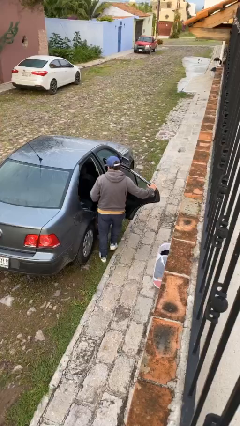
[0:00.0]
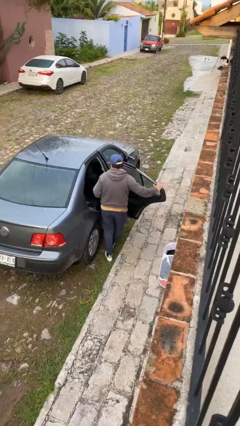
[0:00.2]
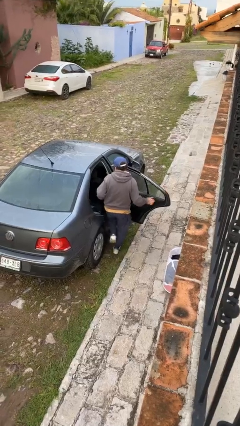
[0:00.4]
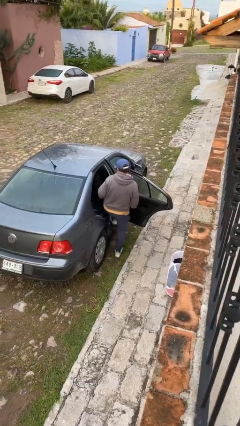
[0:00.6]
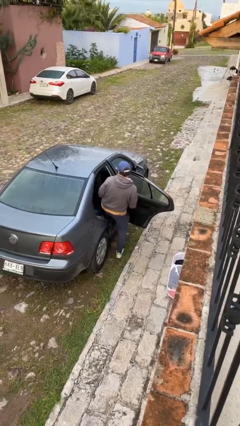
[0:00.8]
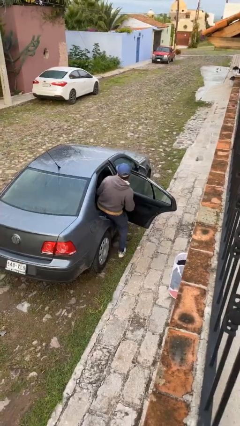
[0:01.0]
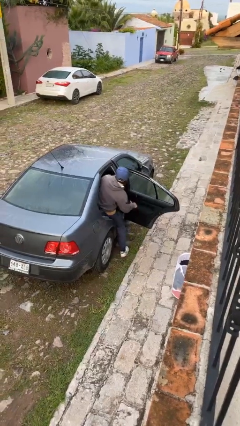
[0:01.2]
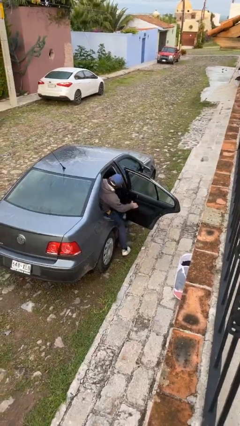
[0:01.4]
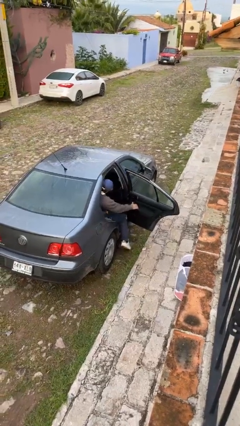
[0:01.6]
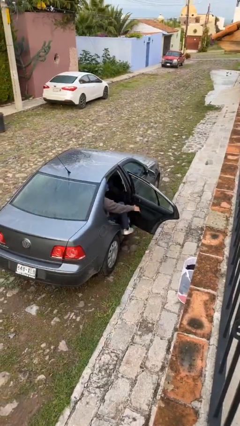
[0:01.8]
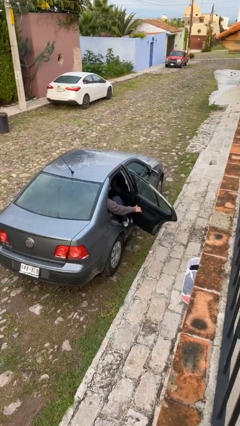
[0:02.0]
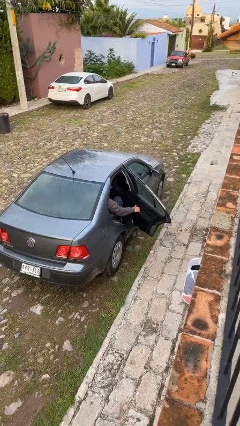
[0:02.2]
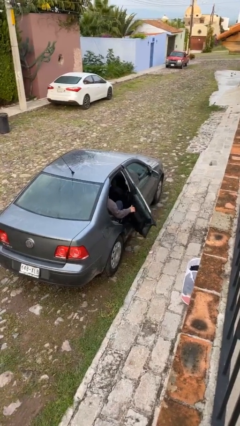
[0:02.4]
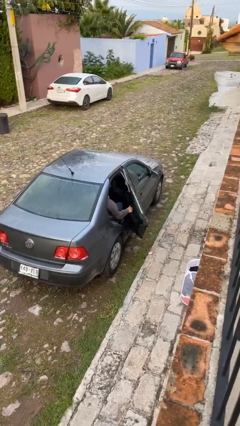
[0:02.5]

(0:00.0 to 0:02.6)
person enters car

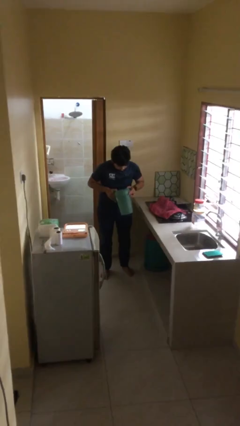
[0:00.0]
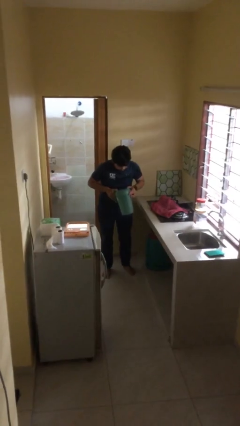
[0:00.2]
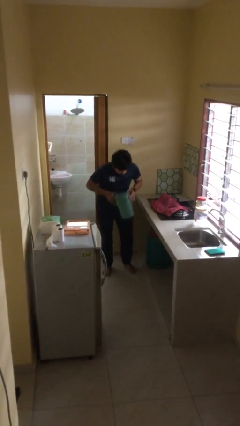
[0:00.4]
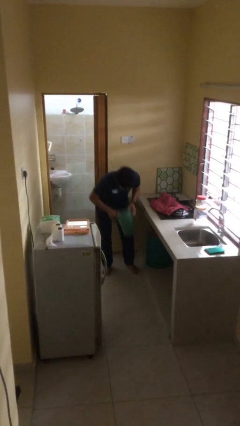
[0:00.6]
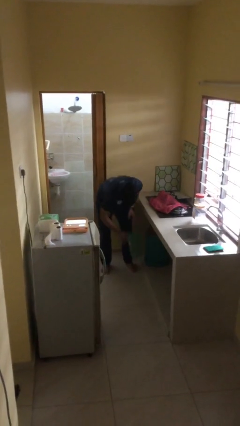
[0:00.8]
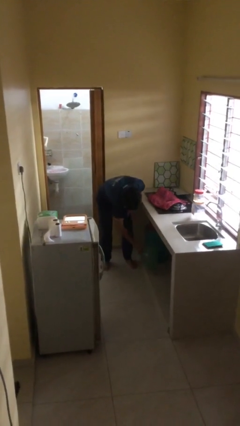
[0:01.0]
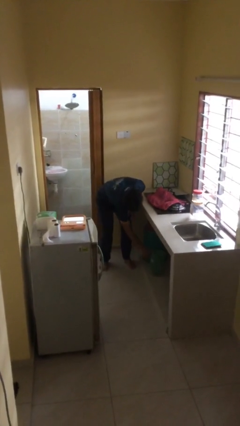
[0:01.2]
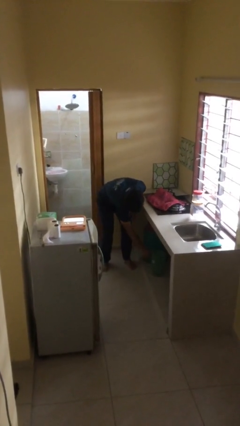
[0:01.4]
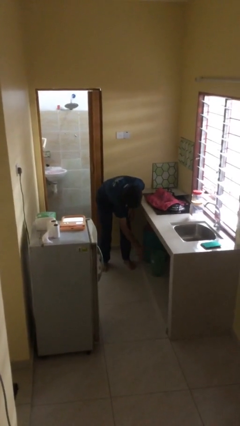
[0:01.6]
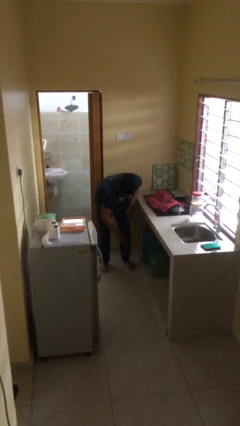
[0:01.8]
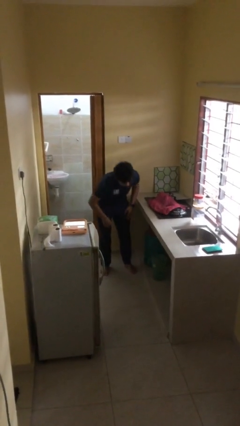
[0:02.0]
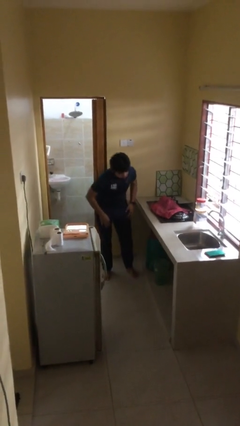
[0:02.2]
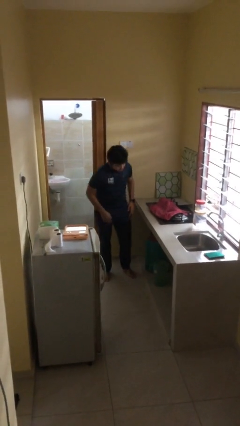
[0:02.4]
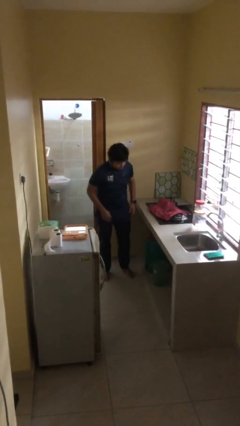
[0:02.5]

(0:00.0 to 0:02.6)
person puts down object into cabinet

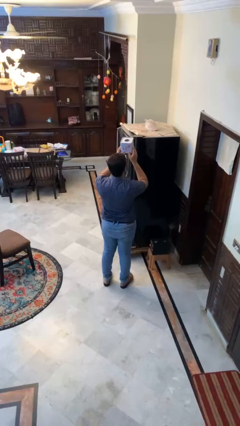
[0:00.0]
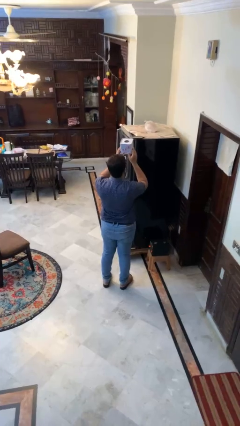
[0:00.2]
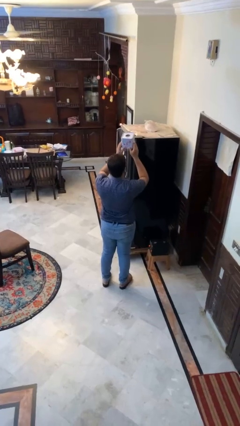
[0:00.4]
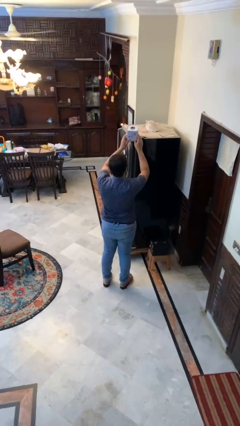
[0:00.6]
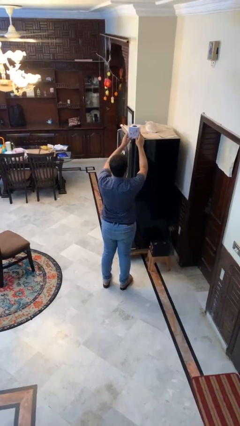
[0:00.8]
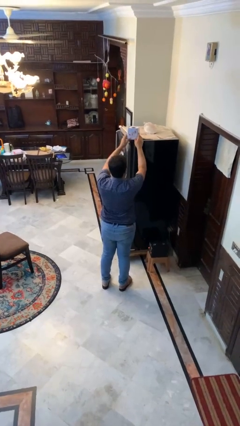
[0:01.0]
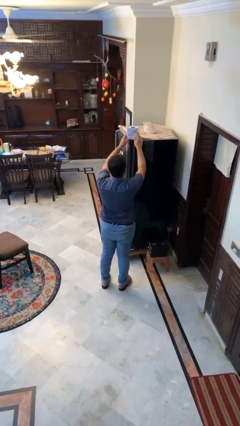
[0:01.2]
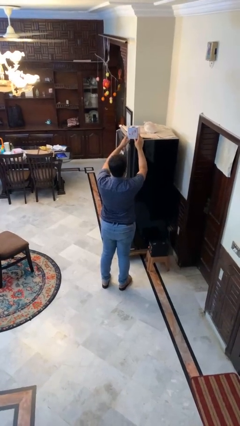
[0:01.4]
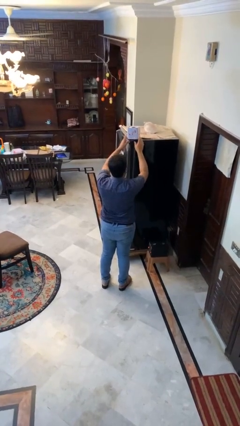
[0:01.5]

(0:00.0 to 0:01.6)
person puts down object on shelf

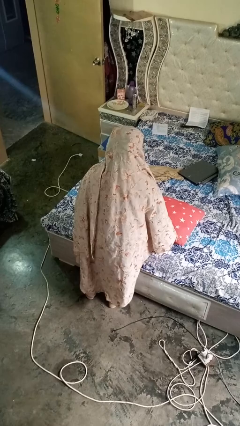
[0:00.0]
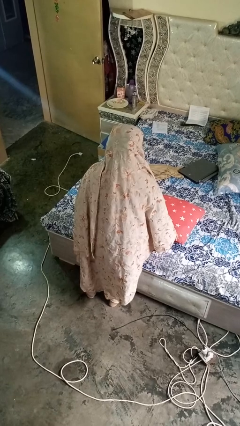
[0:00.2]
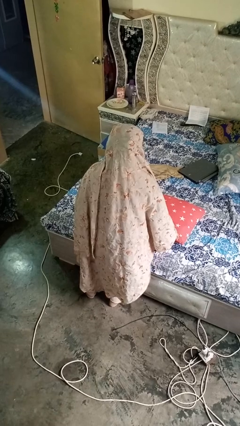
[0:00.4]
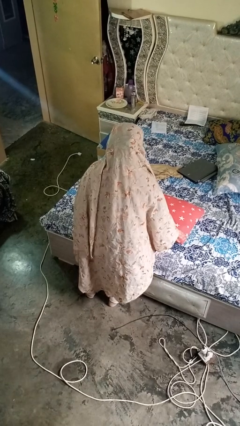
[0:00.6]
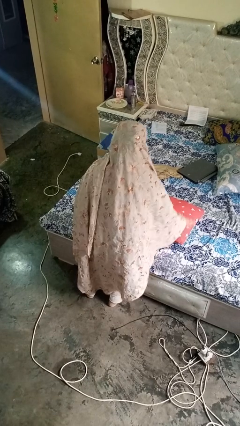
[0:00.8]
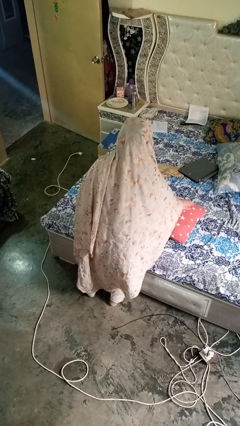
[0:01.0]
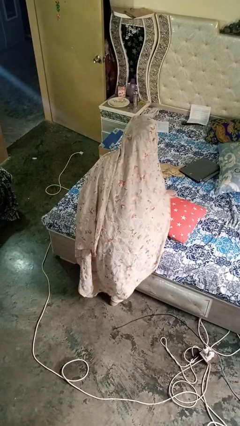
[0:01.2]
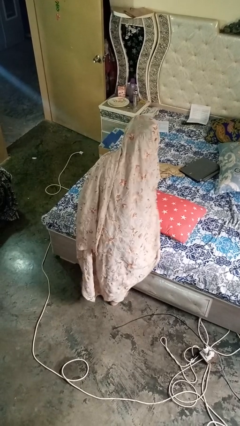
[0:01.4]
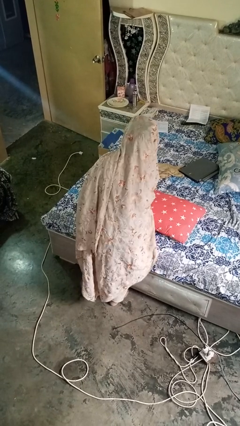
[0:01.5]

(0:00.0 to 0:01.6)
person waves hand over object

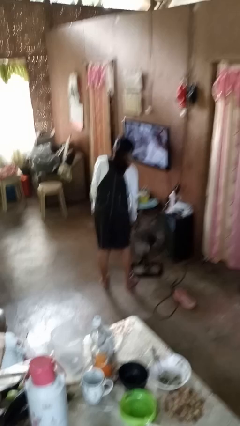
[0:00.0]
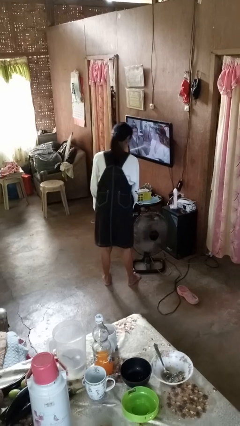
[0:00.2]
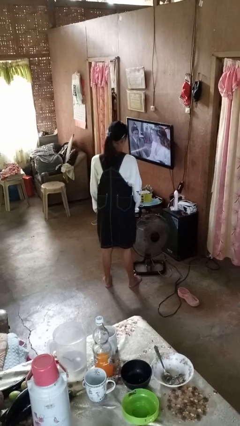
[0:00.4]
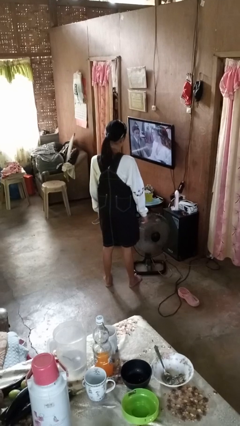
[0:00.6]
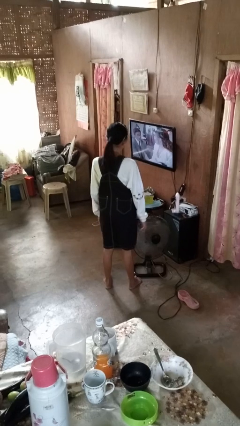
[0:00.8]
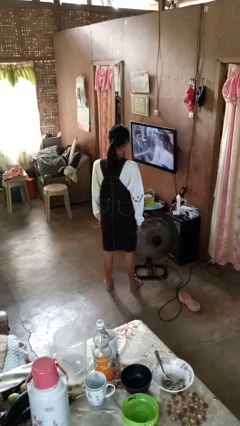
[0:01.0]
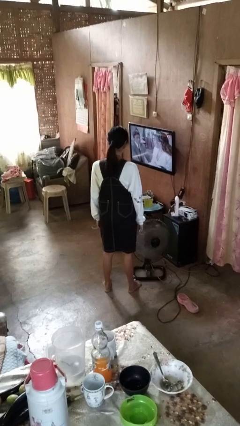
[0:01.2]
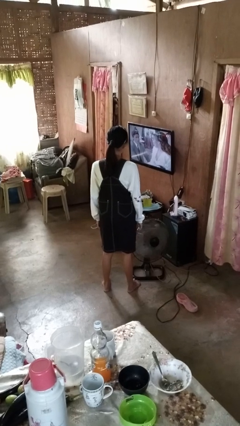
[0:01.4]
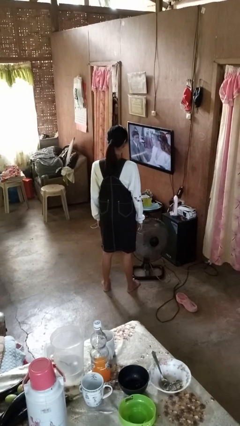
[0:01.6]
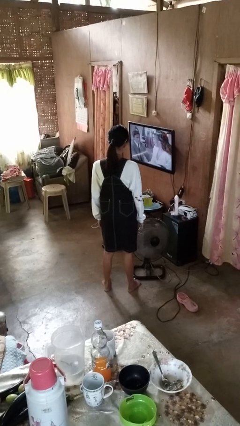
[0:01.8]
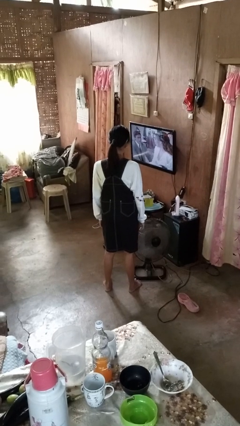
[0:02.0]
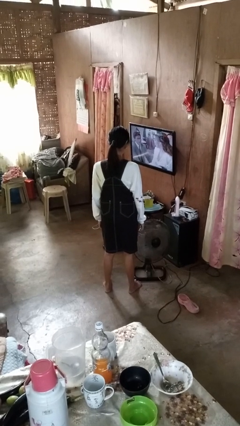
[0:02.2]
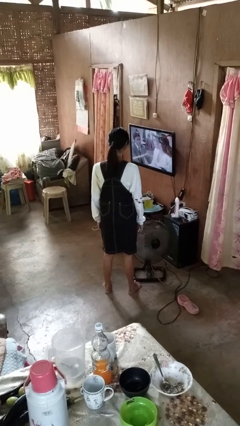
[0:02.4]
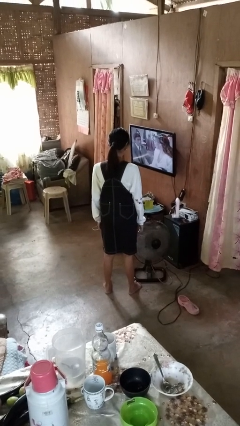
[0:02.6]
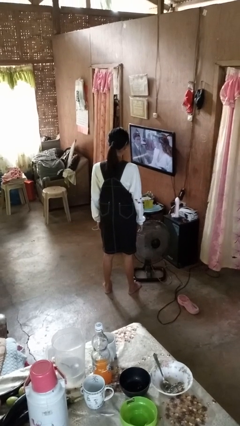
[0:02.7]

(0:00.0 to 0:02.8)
person turns on fan

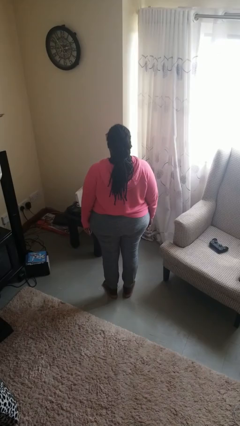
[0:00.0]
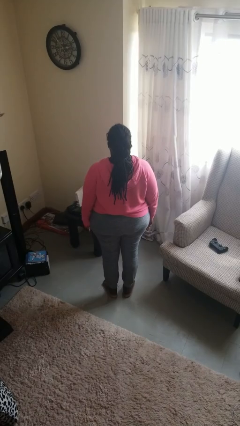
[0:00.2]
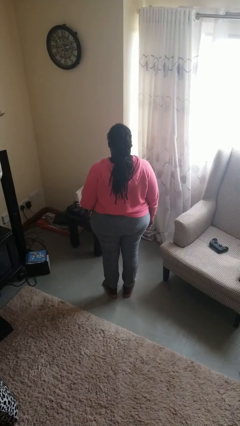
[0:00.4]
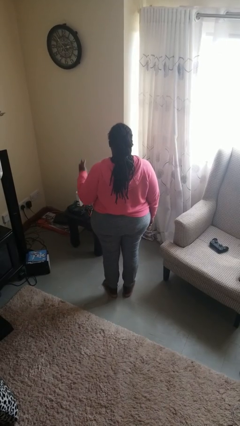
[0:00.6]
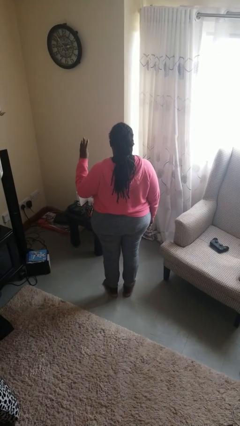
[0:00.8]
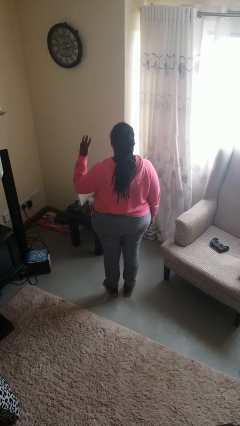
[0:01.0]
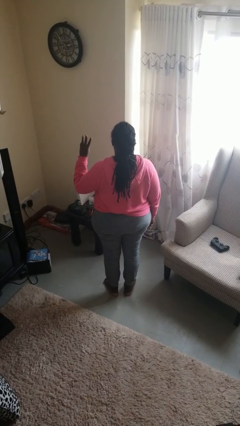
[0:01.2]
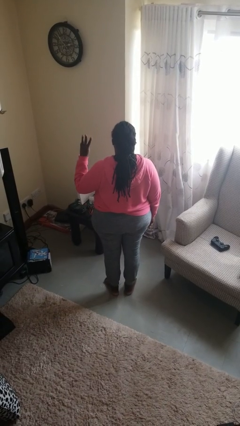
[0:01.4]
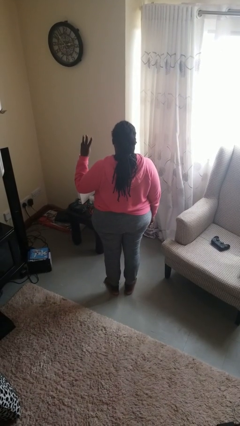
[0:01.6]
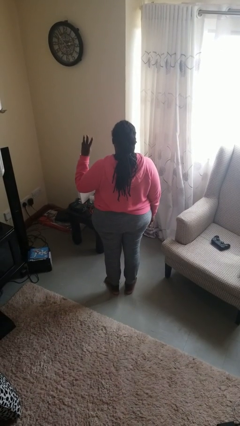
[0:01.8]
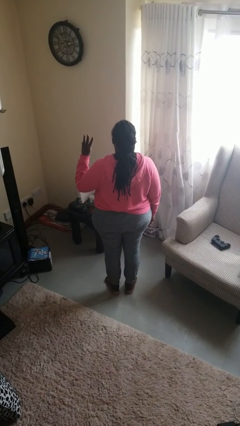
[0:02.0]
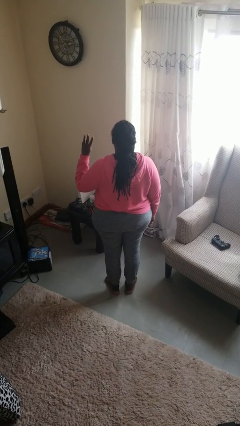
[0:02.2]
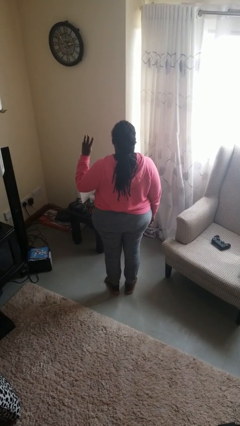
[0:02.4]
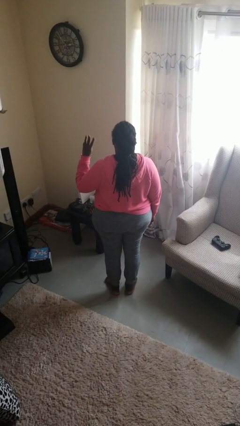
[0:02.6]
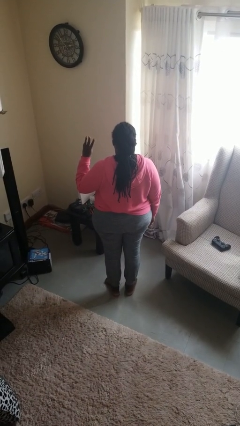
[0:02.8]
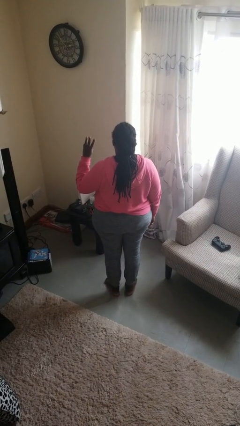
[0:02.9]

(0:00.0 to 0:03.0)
person gestures number three

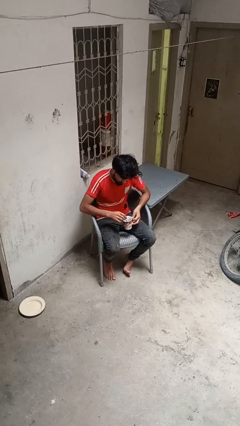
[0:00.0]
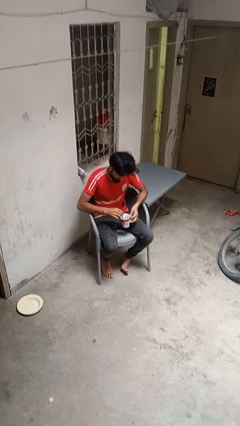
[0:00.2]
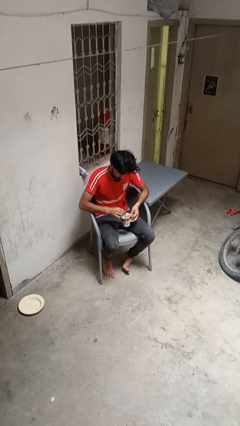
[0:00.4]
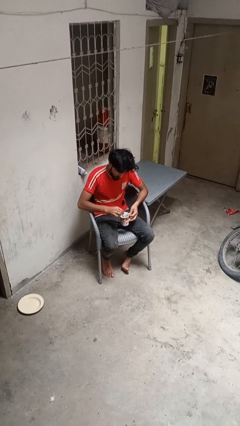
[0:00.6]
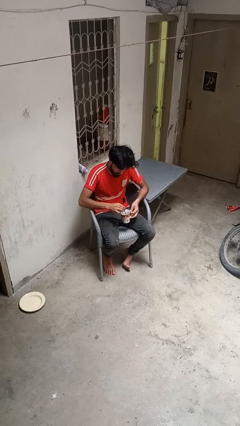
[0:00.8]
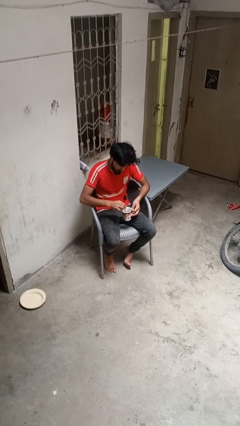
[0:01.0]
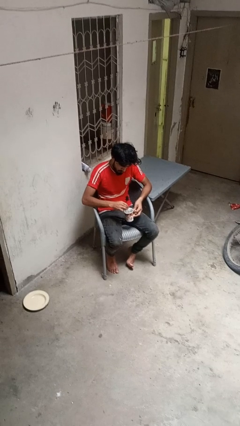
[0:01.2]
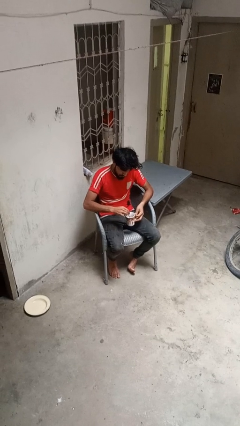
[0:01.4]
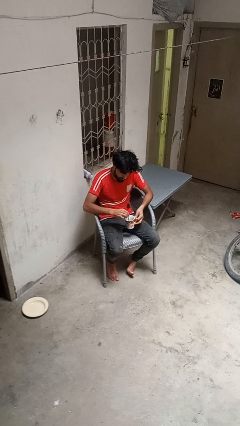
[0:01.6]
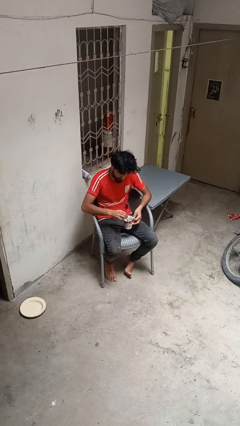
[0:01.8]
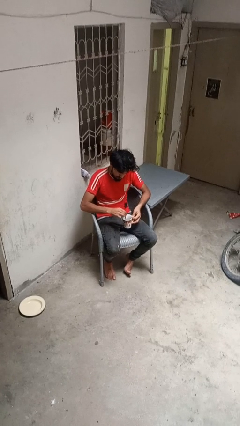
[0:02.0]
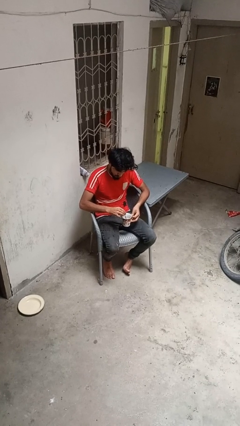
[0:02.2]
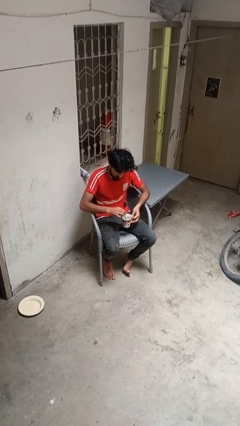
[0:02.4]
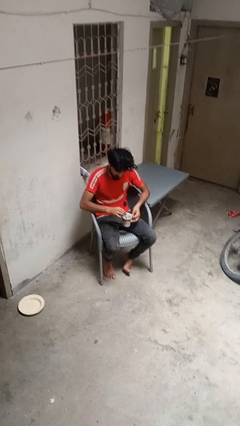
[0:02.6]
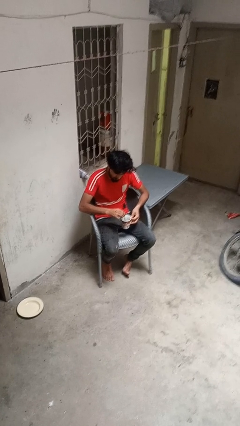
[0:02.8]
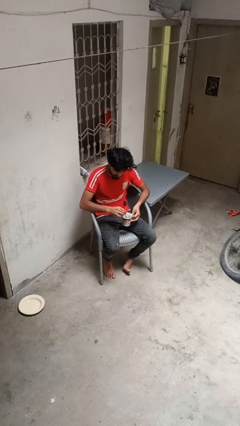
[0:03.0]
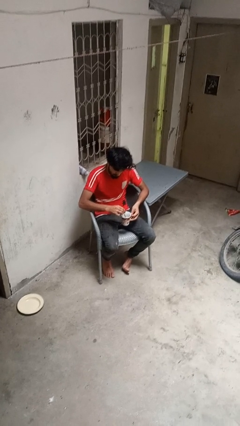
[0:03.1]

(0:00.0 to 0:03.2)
person stirs mug
